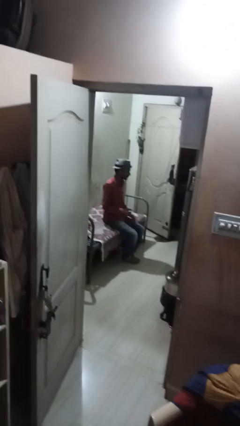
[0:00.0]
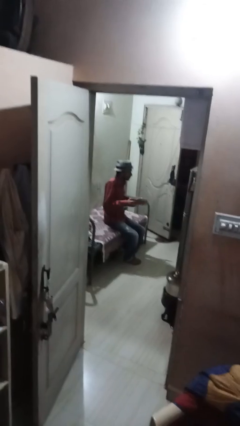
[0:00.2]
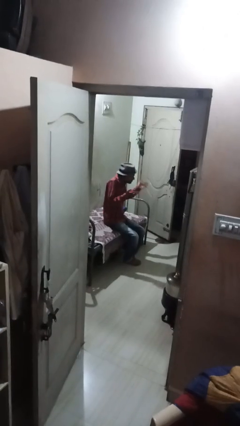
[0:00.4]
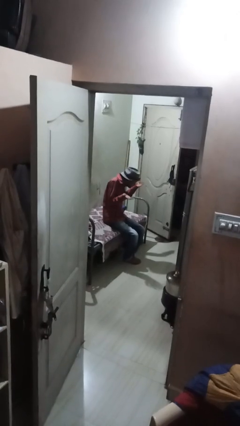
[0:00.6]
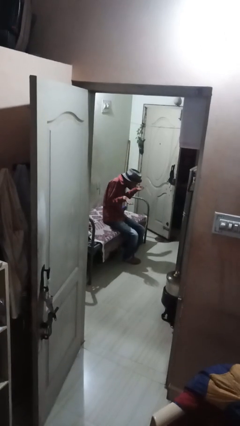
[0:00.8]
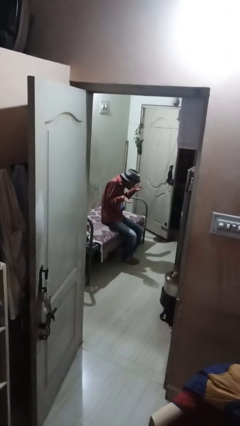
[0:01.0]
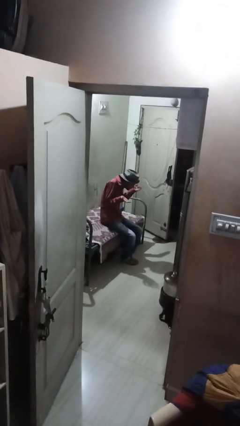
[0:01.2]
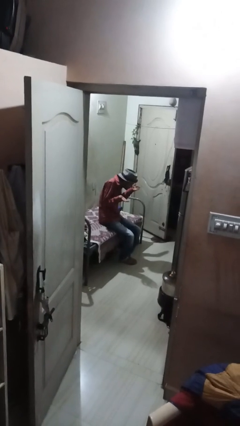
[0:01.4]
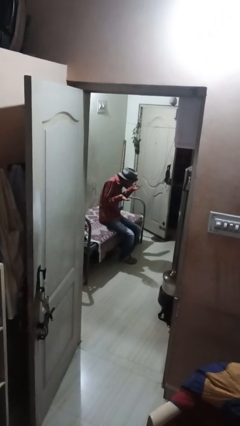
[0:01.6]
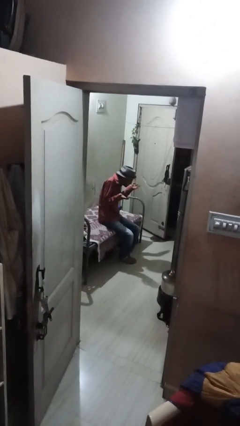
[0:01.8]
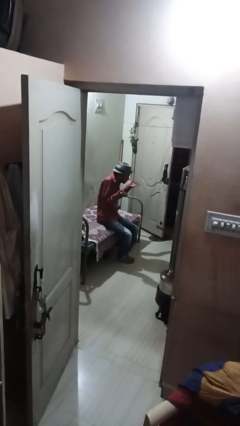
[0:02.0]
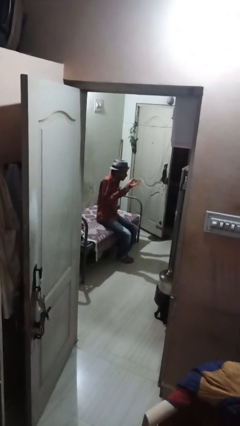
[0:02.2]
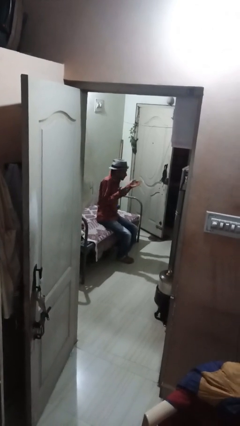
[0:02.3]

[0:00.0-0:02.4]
person shrugs

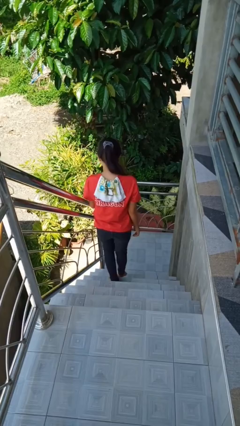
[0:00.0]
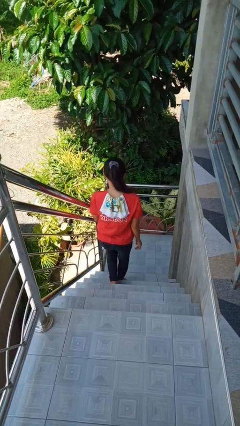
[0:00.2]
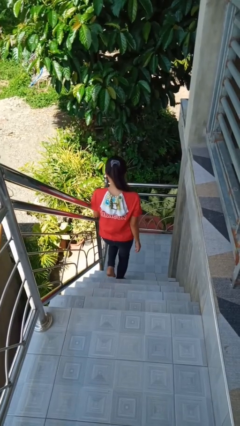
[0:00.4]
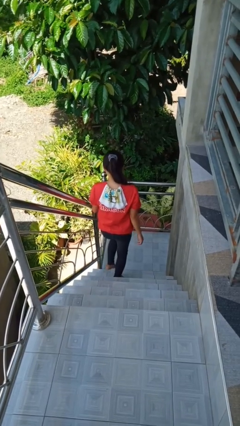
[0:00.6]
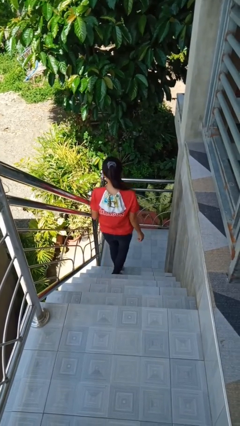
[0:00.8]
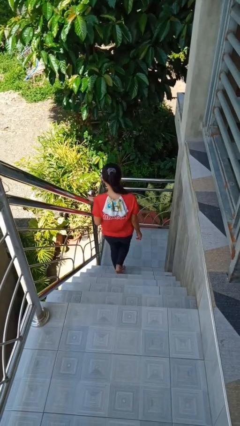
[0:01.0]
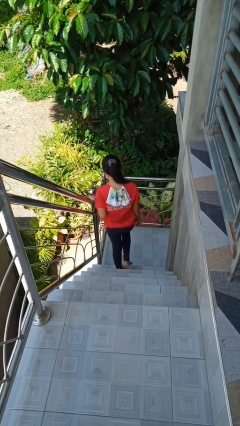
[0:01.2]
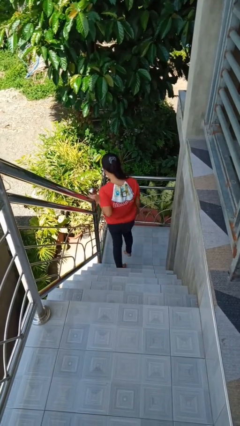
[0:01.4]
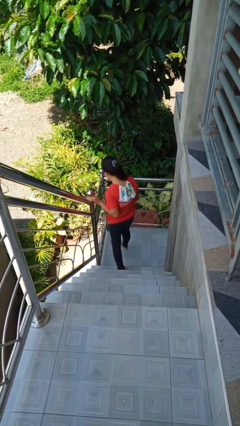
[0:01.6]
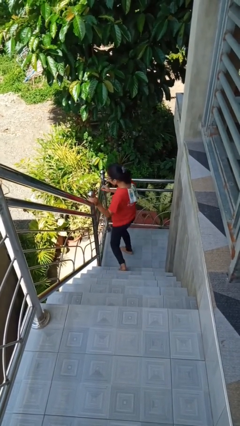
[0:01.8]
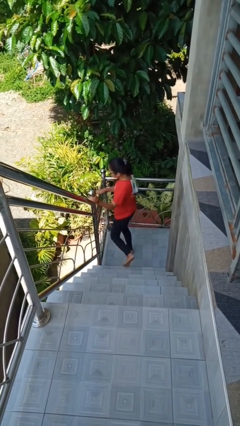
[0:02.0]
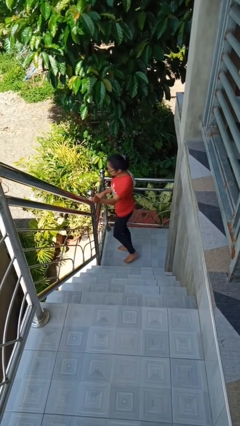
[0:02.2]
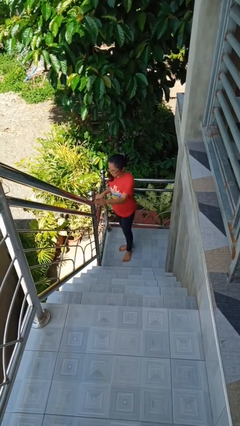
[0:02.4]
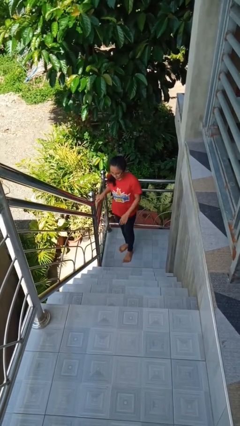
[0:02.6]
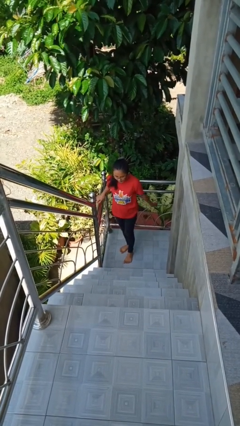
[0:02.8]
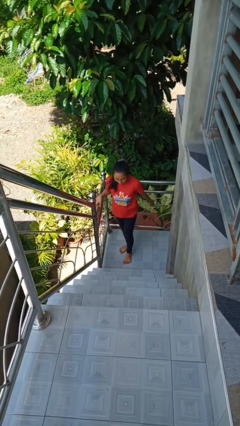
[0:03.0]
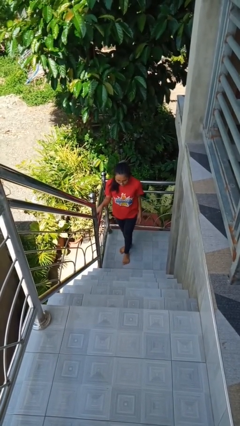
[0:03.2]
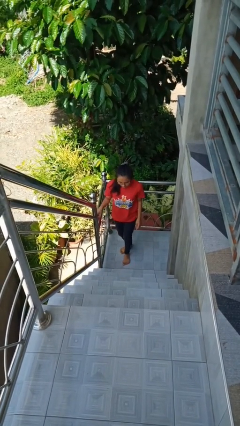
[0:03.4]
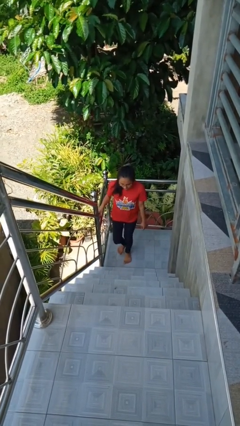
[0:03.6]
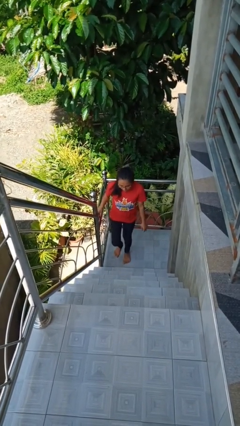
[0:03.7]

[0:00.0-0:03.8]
person climbs down stairs

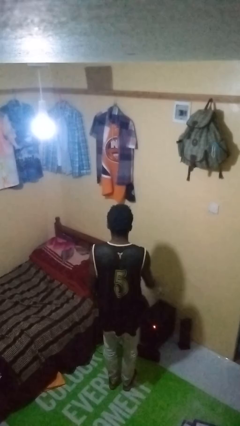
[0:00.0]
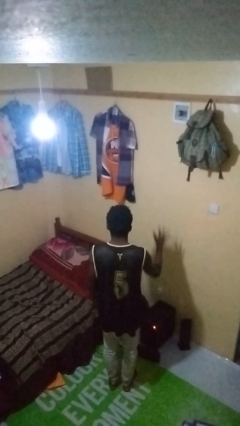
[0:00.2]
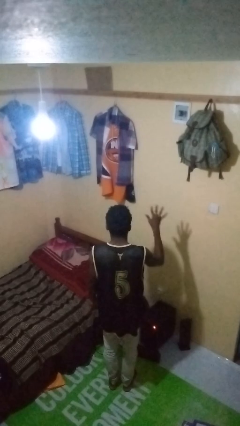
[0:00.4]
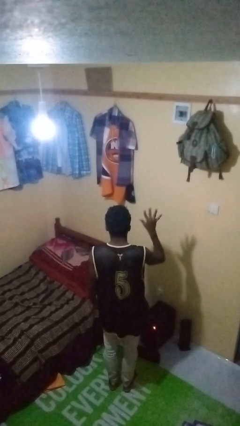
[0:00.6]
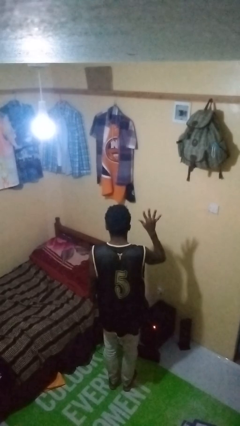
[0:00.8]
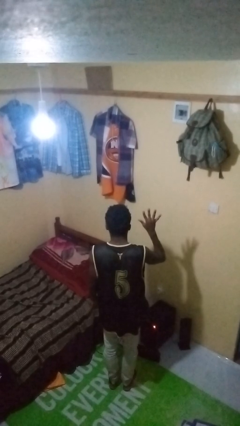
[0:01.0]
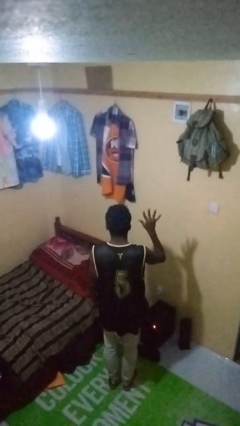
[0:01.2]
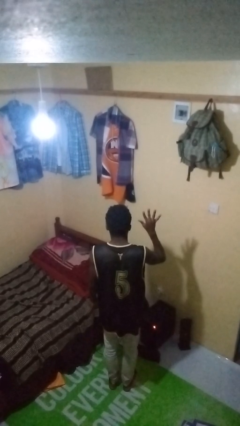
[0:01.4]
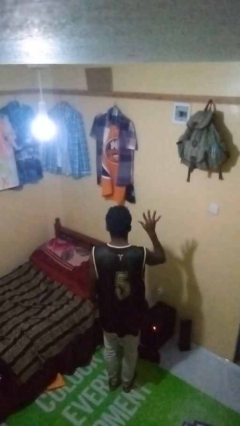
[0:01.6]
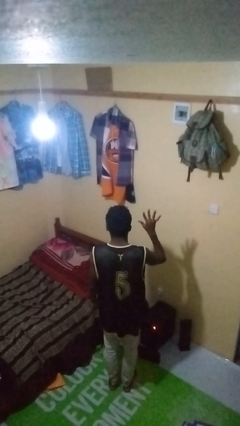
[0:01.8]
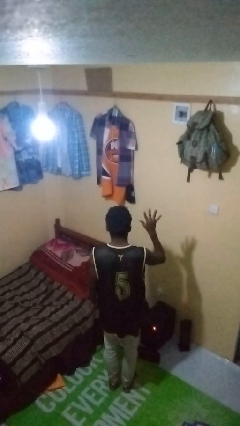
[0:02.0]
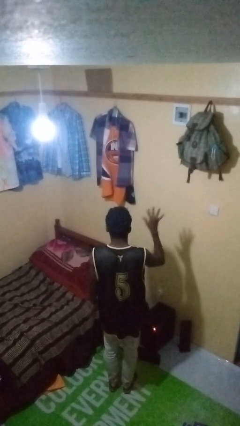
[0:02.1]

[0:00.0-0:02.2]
person gestures number five

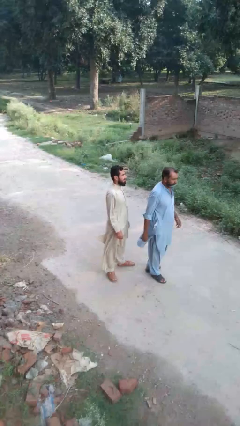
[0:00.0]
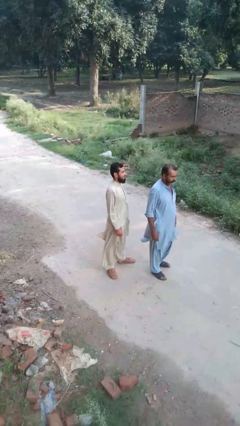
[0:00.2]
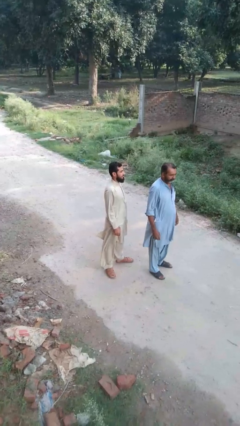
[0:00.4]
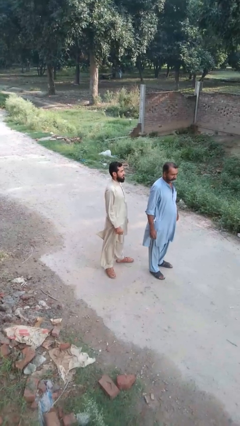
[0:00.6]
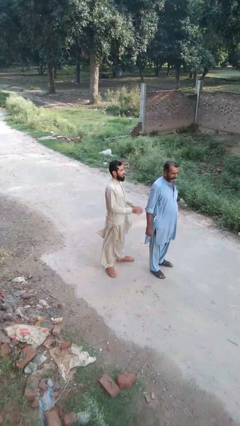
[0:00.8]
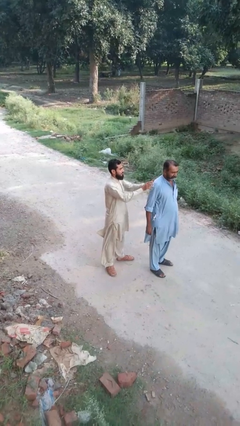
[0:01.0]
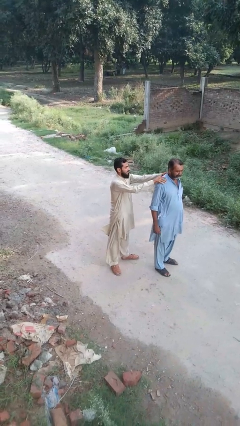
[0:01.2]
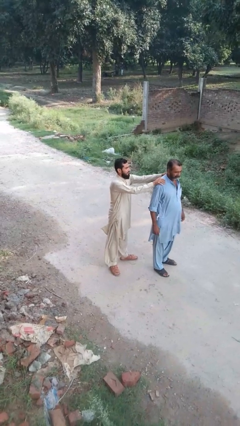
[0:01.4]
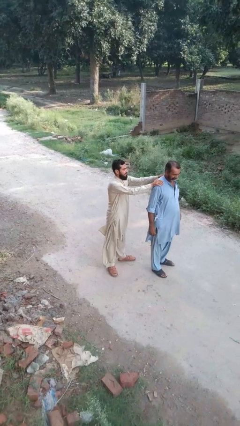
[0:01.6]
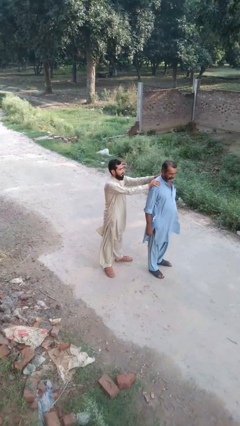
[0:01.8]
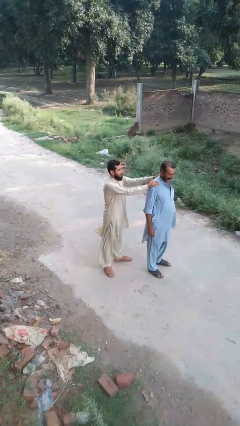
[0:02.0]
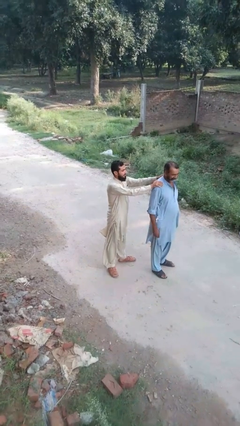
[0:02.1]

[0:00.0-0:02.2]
person grabs person by shoulder

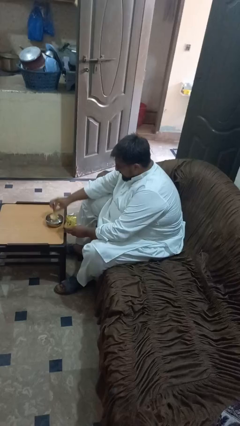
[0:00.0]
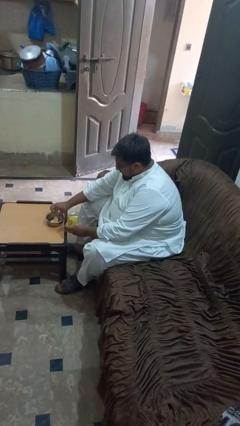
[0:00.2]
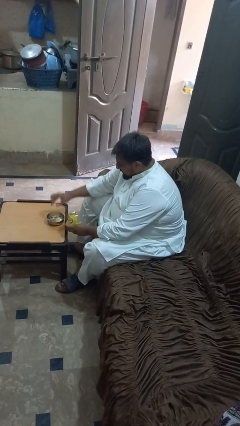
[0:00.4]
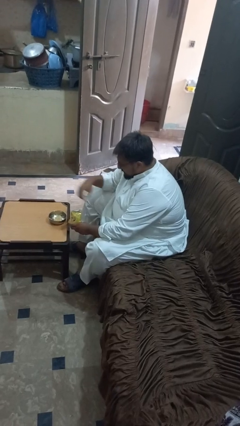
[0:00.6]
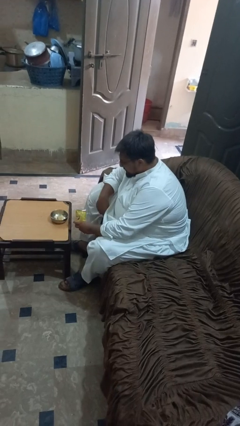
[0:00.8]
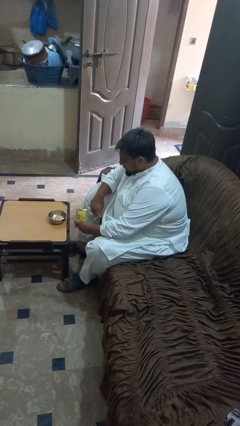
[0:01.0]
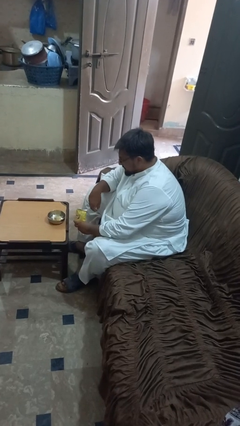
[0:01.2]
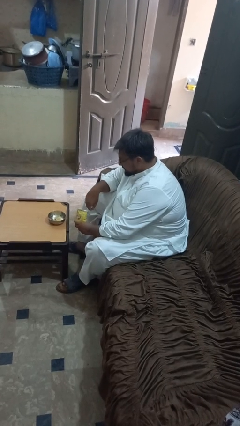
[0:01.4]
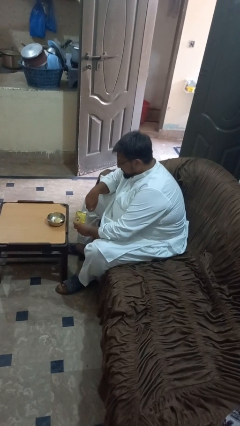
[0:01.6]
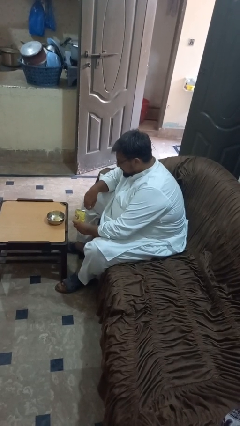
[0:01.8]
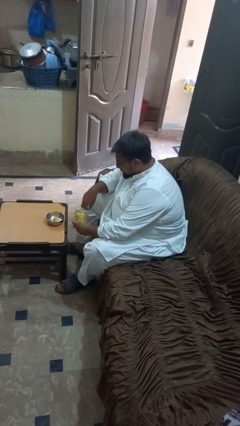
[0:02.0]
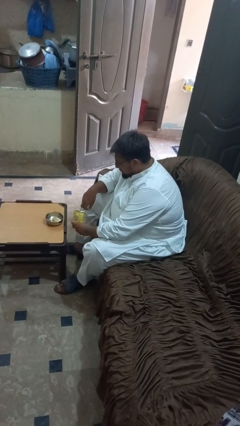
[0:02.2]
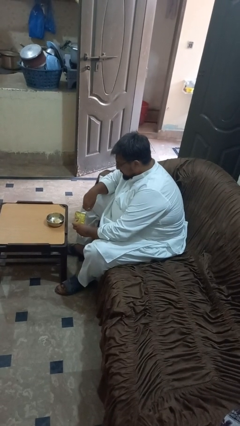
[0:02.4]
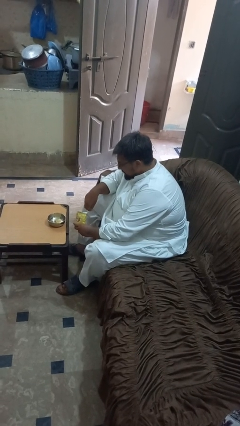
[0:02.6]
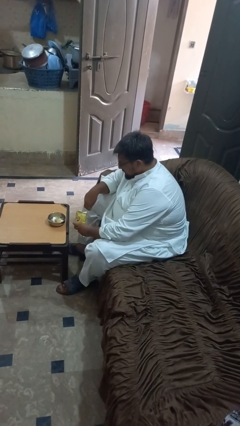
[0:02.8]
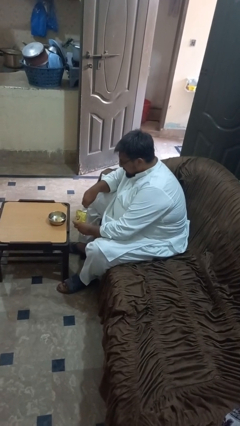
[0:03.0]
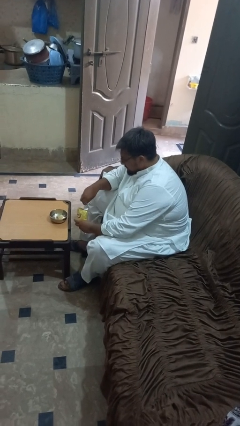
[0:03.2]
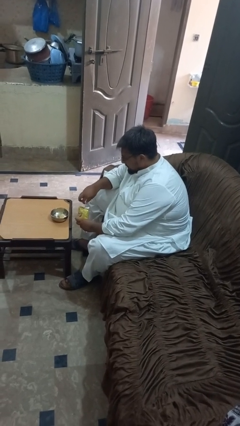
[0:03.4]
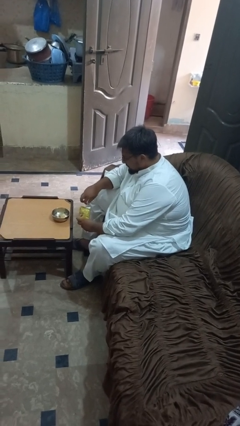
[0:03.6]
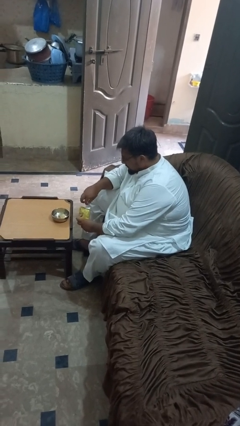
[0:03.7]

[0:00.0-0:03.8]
person pours into bowl

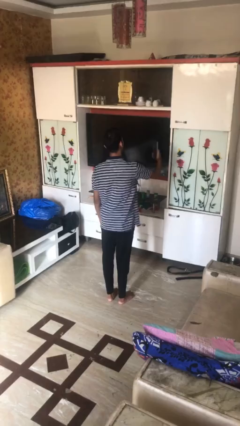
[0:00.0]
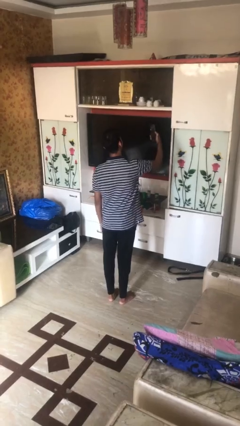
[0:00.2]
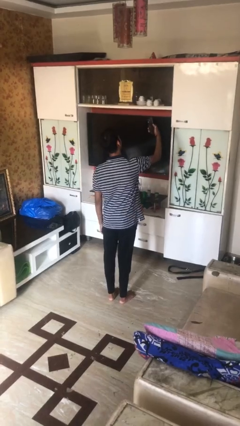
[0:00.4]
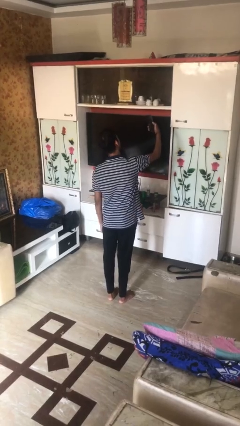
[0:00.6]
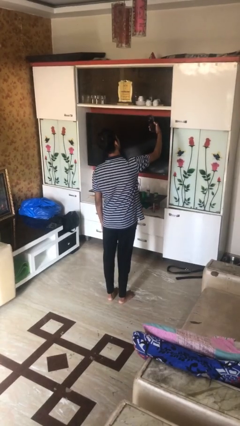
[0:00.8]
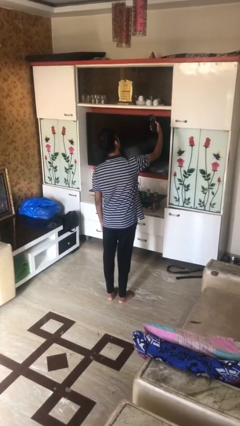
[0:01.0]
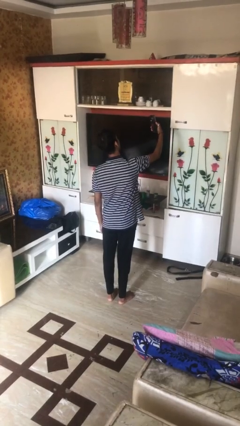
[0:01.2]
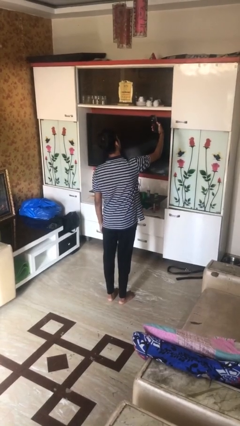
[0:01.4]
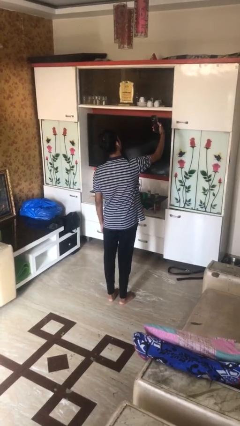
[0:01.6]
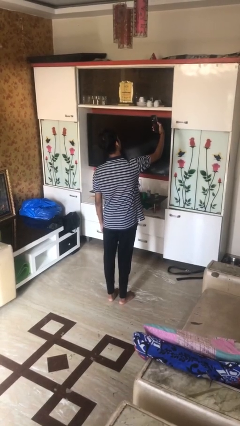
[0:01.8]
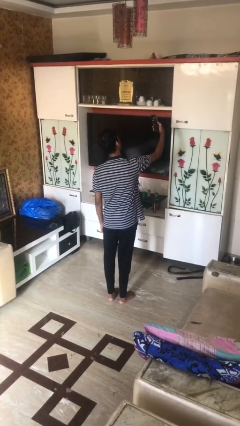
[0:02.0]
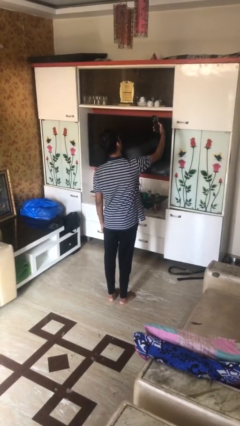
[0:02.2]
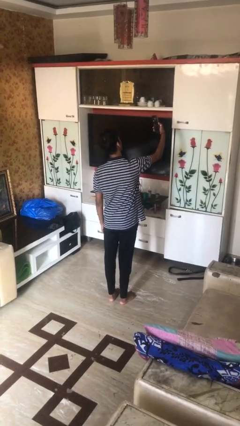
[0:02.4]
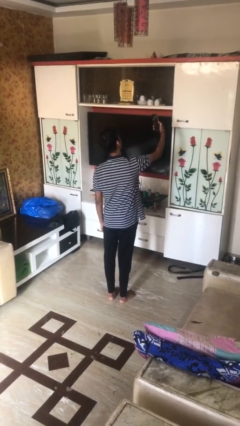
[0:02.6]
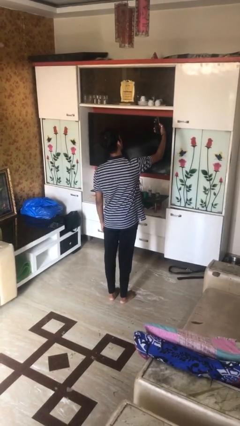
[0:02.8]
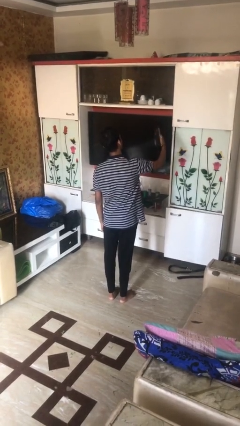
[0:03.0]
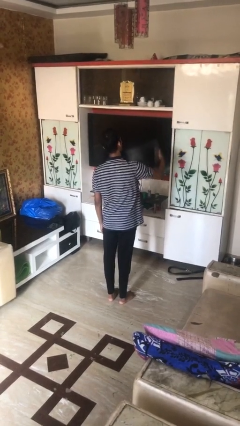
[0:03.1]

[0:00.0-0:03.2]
person takes selfie

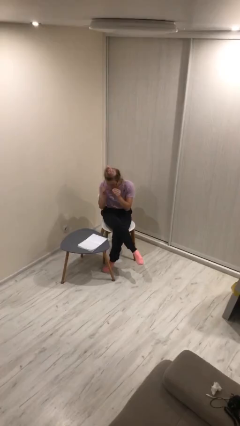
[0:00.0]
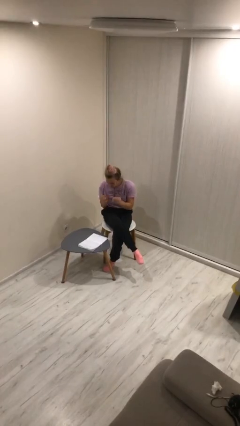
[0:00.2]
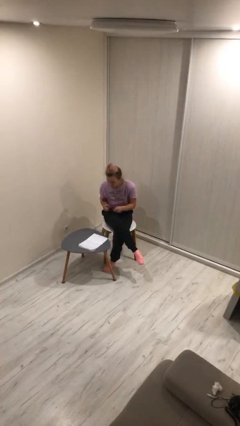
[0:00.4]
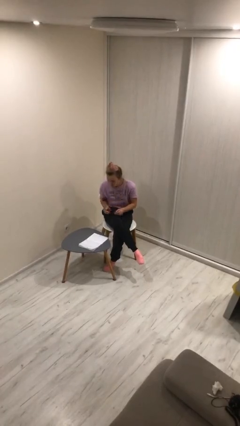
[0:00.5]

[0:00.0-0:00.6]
person takes off glasses
